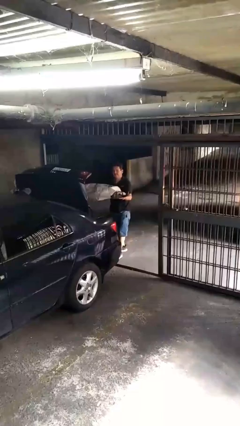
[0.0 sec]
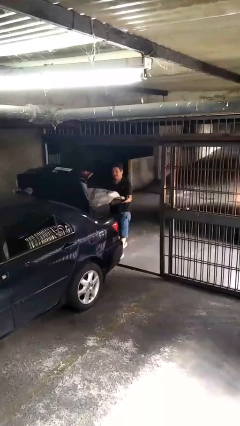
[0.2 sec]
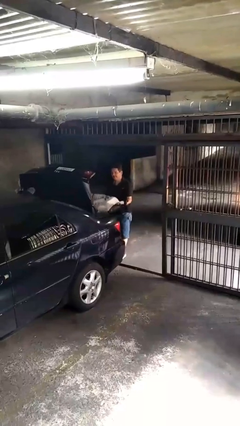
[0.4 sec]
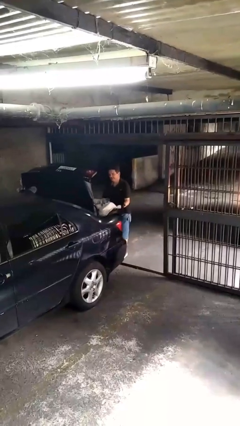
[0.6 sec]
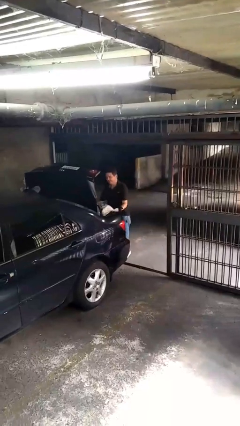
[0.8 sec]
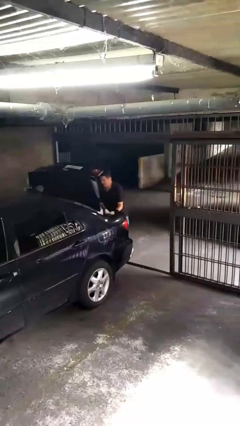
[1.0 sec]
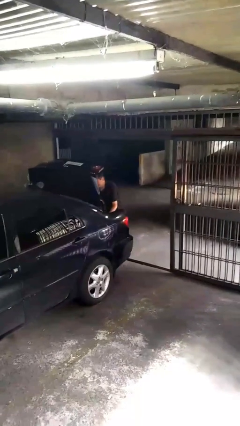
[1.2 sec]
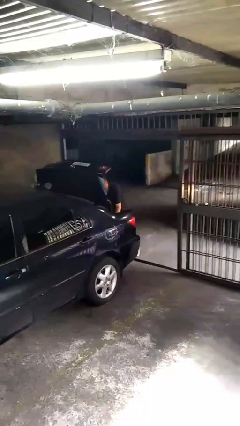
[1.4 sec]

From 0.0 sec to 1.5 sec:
person loads car

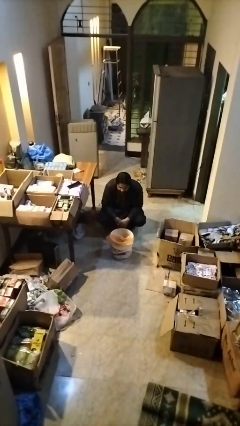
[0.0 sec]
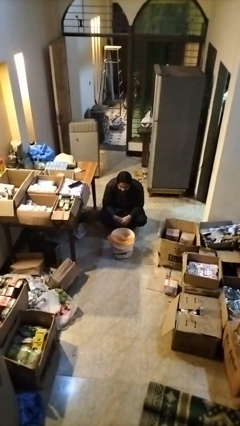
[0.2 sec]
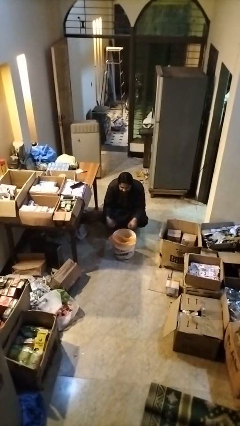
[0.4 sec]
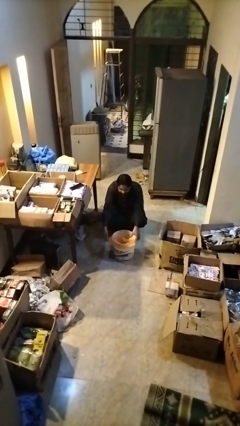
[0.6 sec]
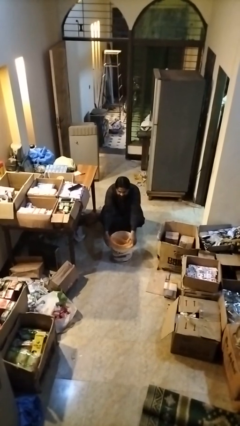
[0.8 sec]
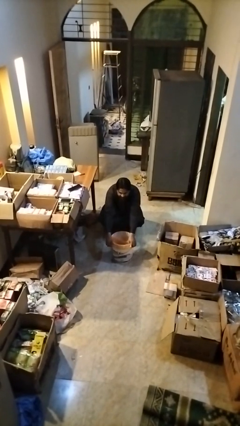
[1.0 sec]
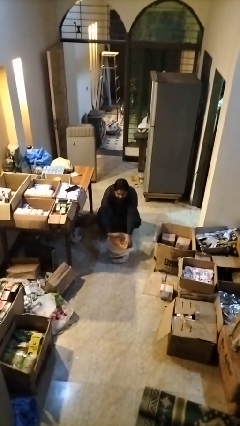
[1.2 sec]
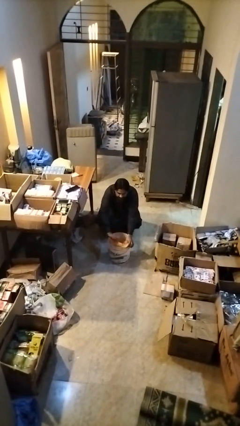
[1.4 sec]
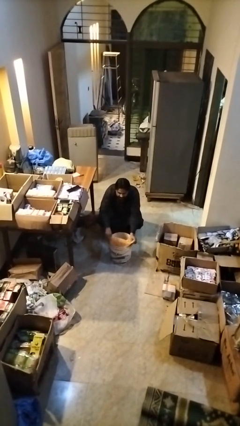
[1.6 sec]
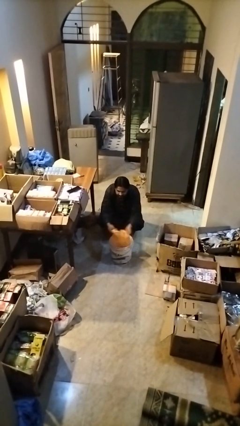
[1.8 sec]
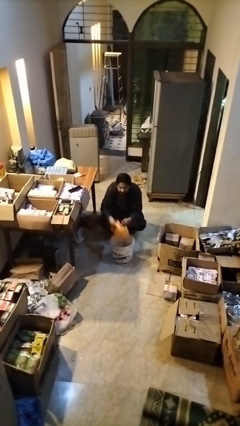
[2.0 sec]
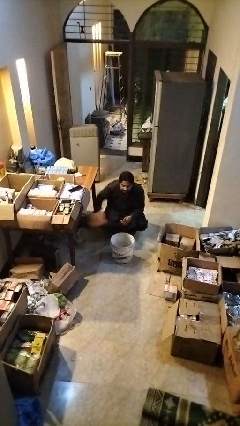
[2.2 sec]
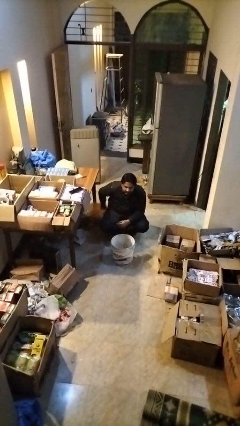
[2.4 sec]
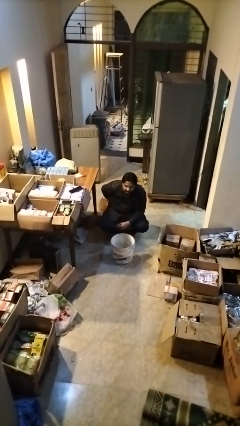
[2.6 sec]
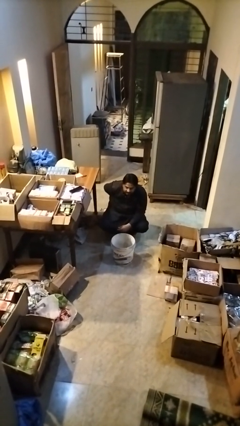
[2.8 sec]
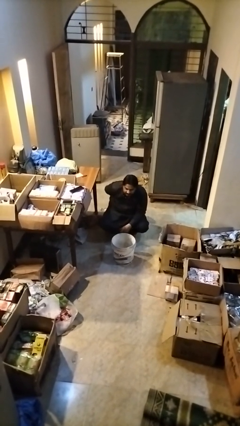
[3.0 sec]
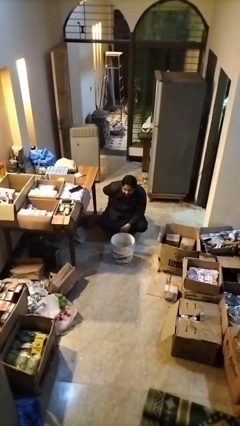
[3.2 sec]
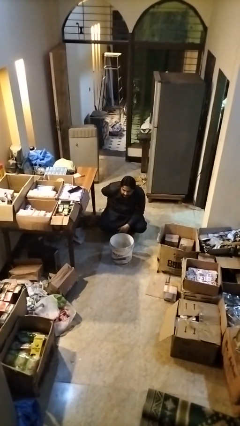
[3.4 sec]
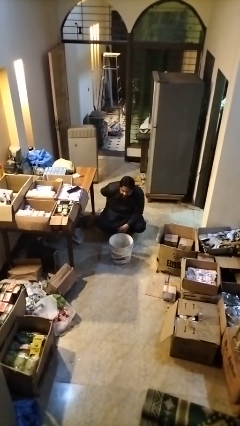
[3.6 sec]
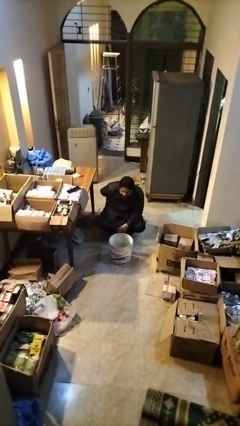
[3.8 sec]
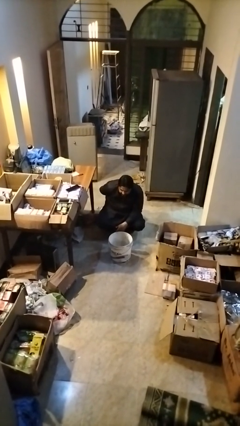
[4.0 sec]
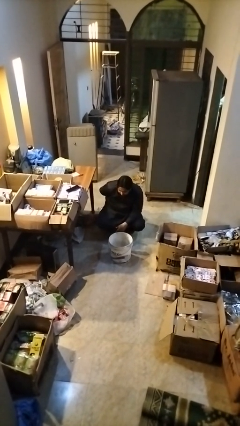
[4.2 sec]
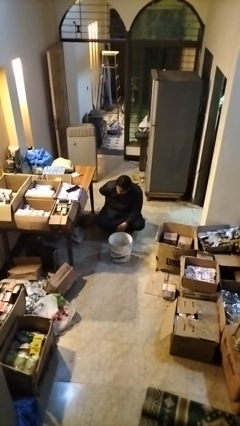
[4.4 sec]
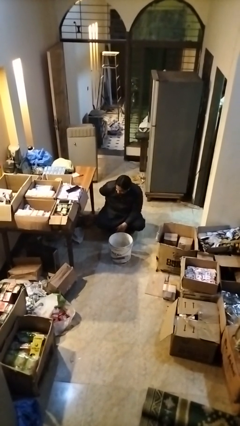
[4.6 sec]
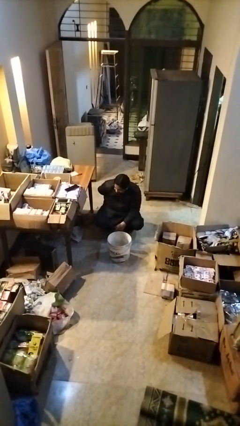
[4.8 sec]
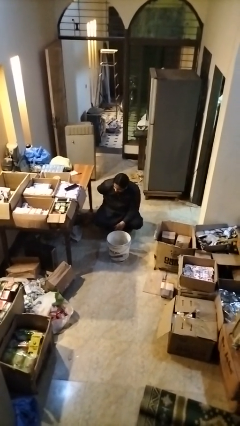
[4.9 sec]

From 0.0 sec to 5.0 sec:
person removes trashbag from trashcan

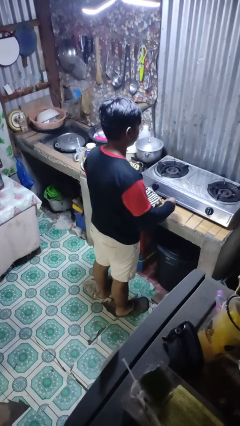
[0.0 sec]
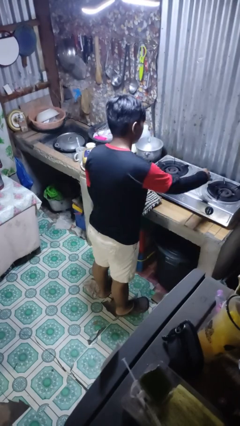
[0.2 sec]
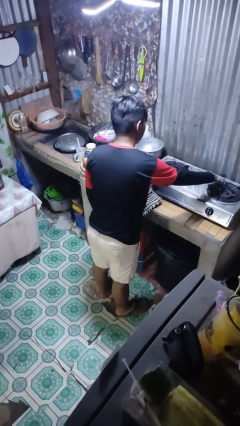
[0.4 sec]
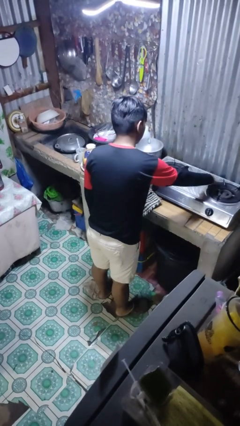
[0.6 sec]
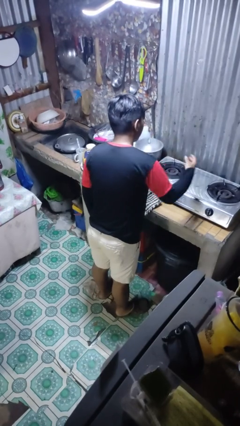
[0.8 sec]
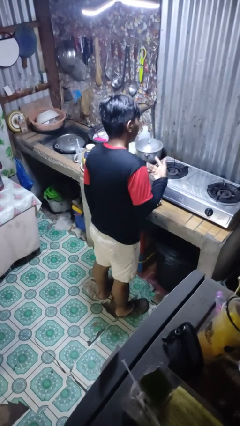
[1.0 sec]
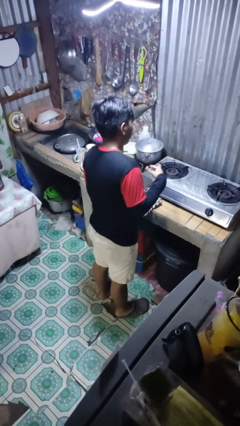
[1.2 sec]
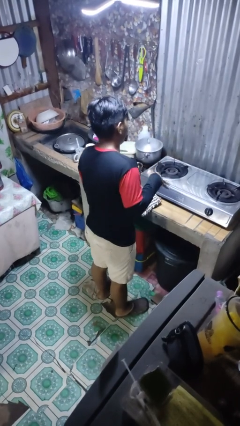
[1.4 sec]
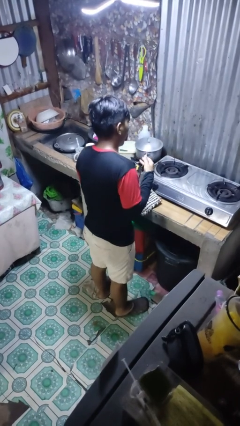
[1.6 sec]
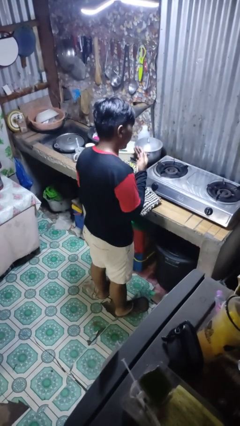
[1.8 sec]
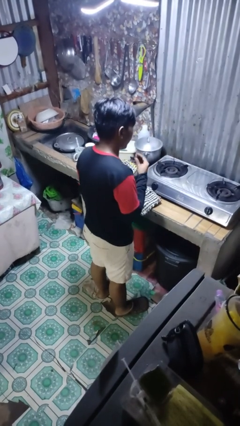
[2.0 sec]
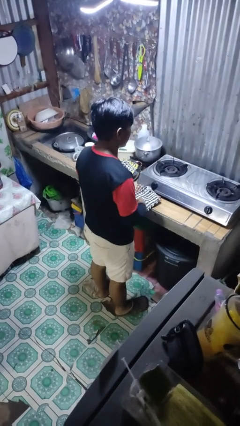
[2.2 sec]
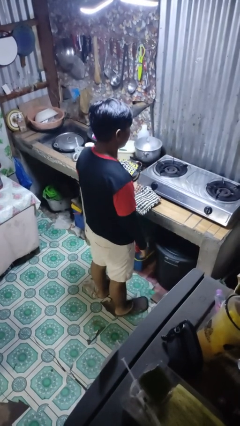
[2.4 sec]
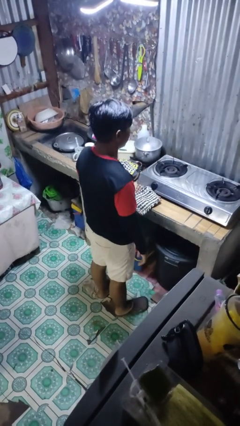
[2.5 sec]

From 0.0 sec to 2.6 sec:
person burns hand

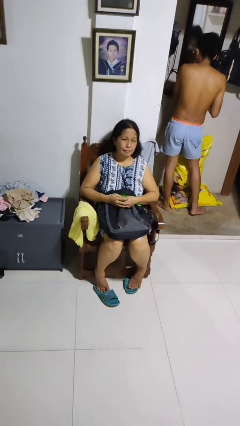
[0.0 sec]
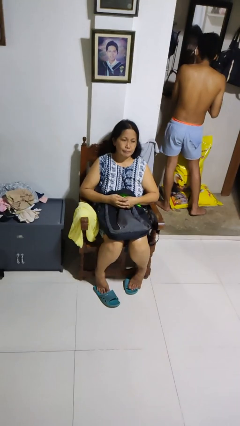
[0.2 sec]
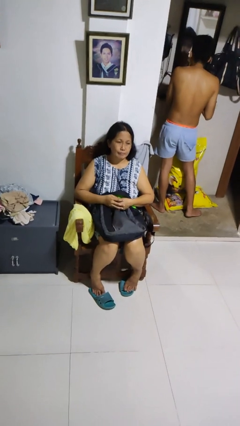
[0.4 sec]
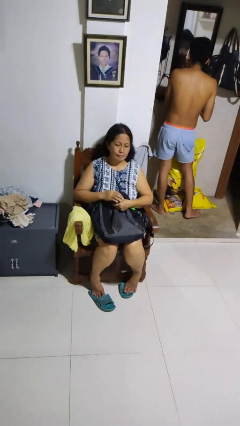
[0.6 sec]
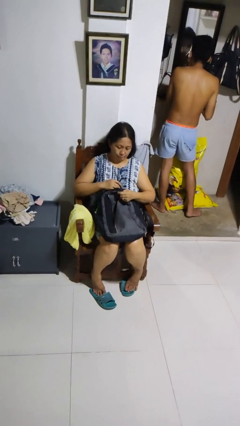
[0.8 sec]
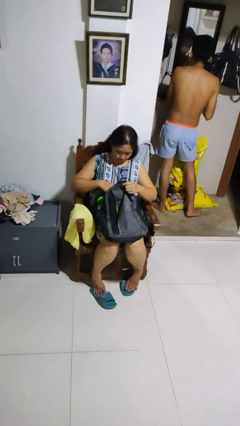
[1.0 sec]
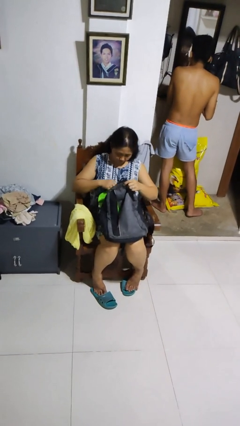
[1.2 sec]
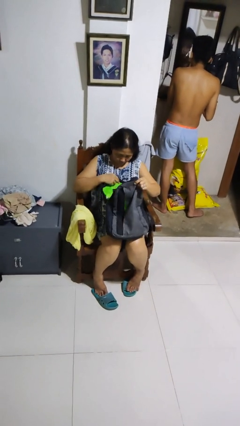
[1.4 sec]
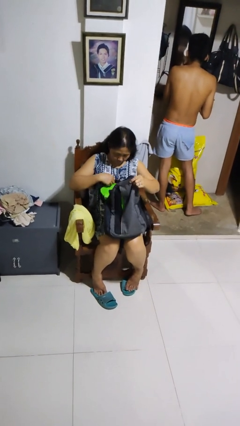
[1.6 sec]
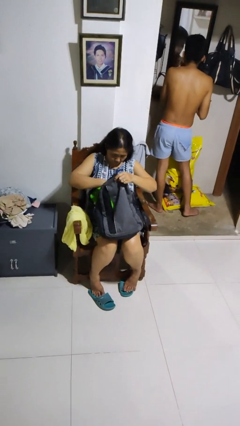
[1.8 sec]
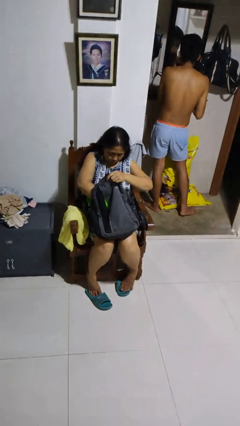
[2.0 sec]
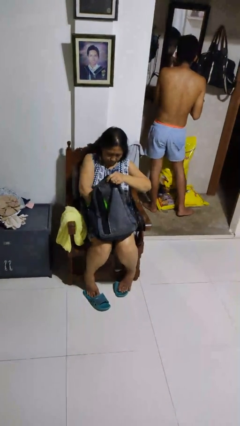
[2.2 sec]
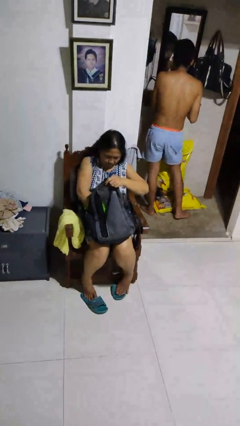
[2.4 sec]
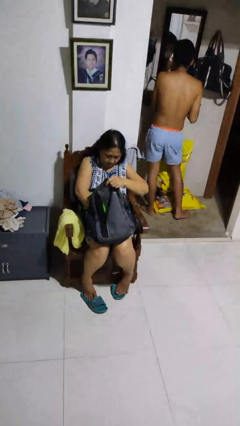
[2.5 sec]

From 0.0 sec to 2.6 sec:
person searches in backpack

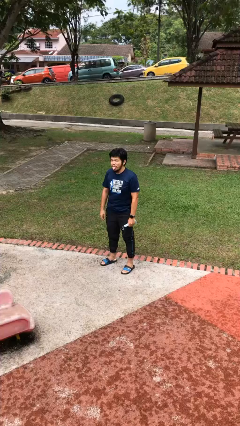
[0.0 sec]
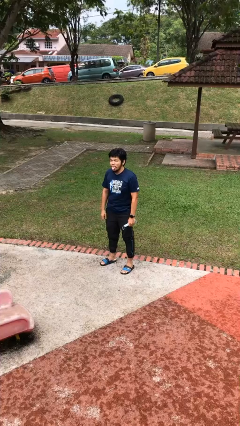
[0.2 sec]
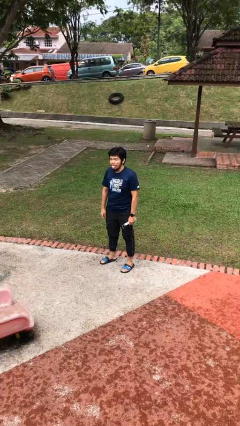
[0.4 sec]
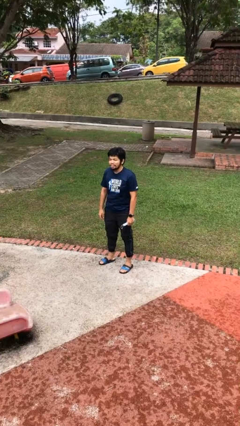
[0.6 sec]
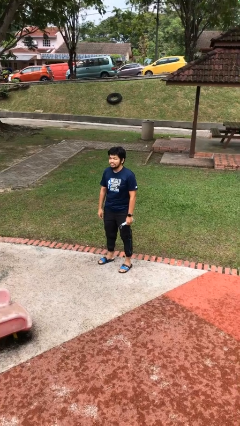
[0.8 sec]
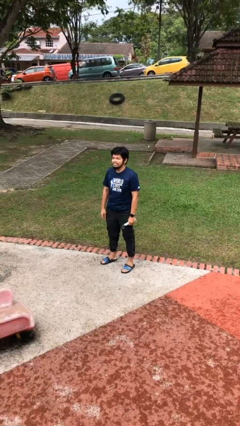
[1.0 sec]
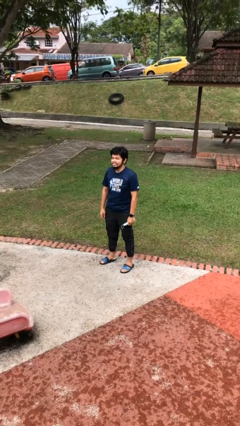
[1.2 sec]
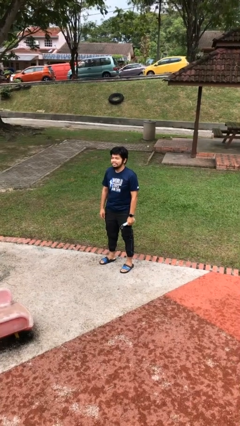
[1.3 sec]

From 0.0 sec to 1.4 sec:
person sticks out tongue

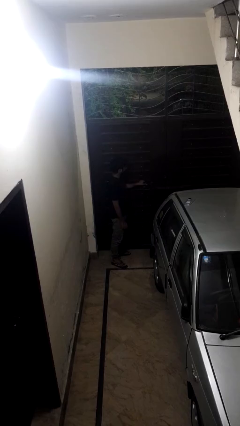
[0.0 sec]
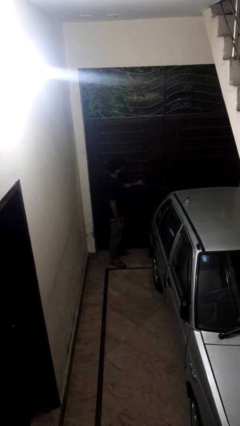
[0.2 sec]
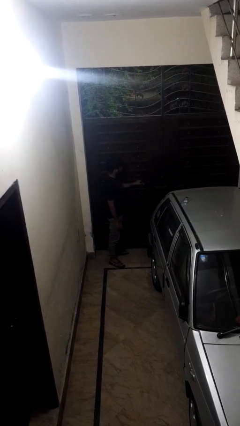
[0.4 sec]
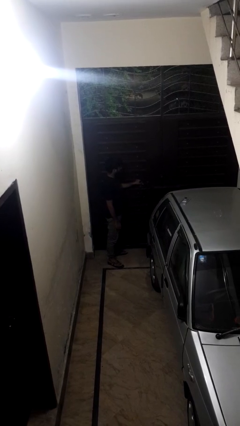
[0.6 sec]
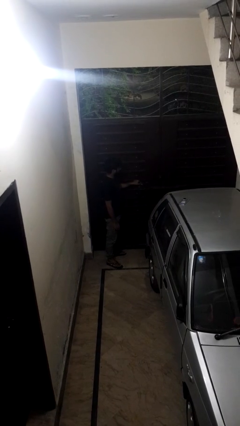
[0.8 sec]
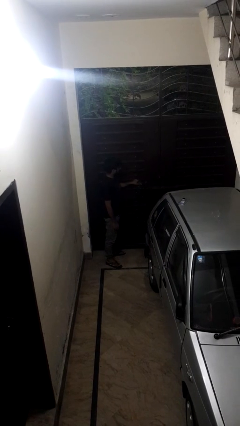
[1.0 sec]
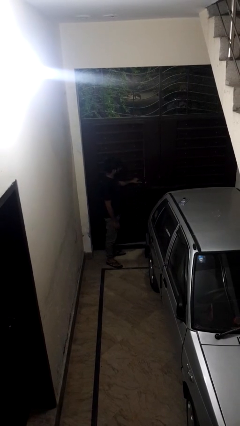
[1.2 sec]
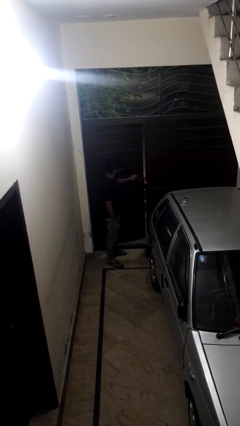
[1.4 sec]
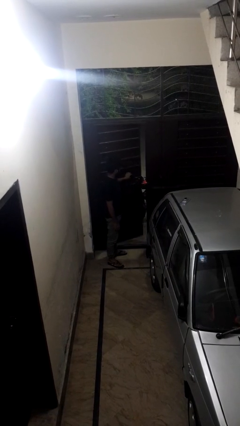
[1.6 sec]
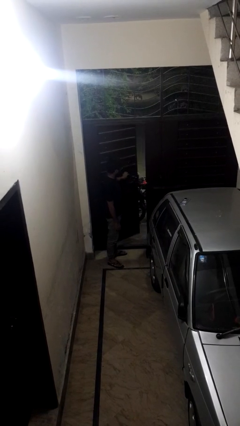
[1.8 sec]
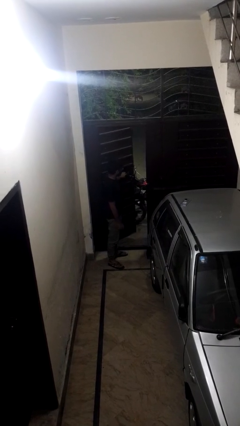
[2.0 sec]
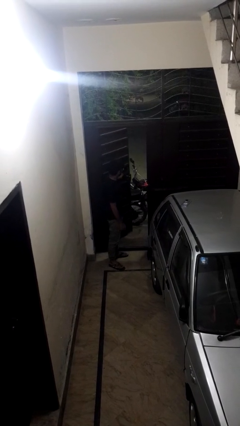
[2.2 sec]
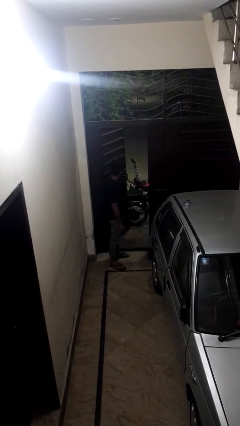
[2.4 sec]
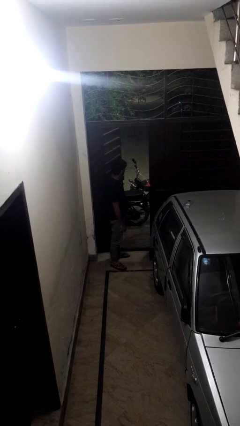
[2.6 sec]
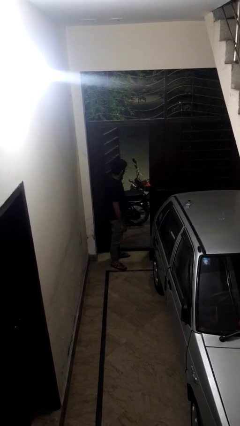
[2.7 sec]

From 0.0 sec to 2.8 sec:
person opens gate

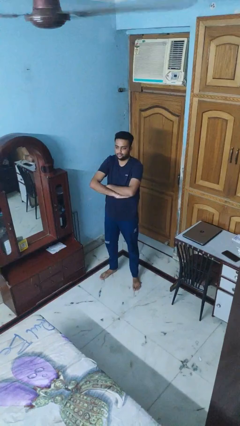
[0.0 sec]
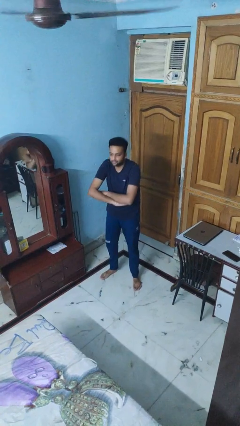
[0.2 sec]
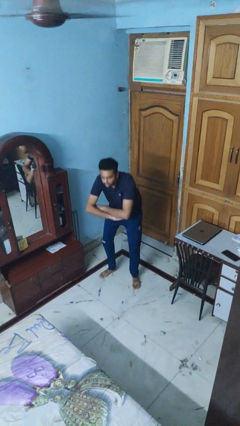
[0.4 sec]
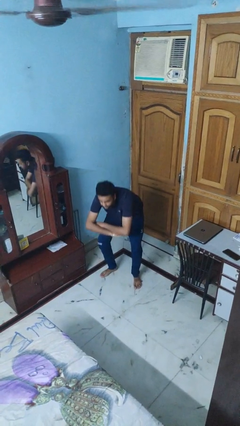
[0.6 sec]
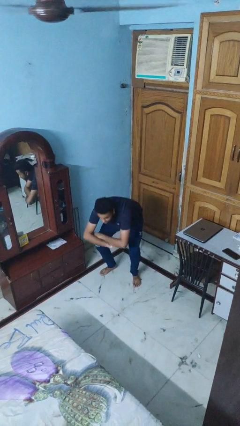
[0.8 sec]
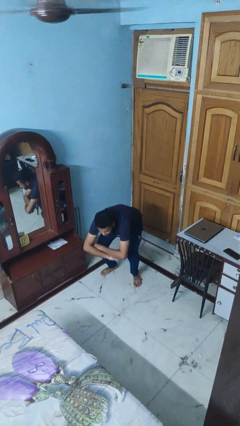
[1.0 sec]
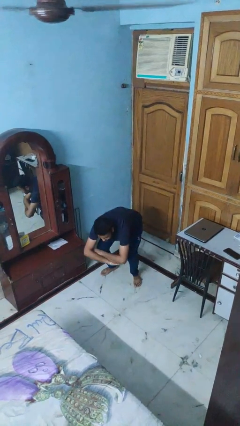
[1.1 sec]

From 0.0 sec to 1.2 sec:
person squats
